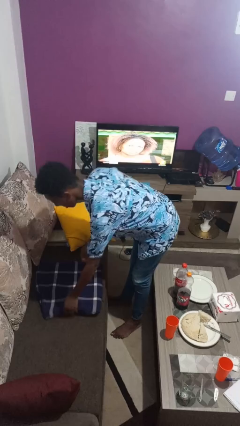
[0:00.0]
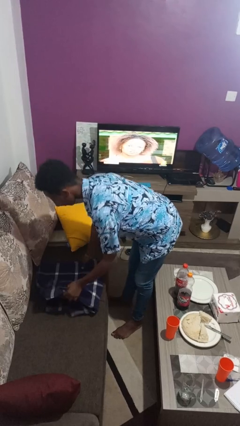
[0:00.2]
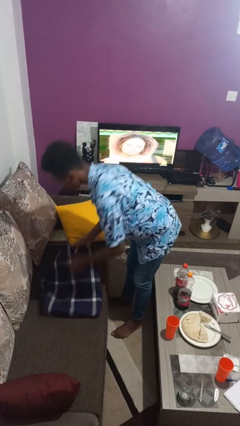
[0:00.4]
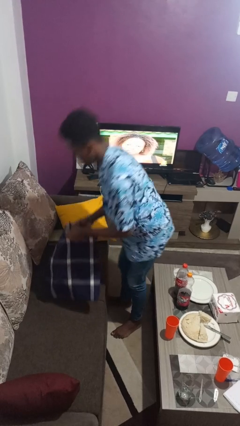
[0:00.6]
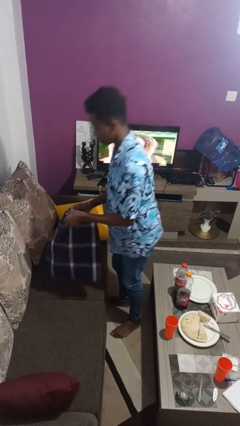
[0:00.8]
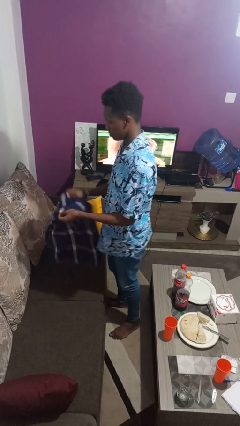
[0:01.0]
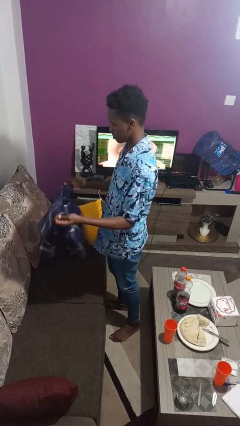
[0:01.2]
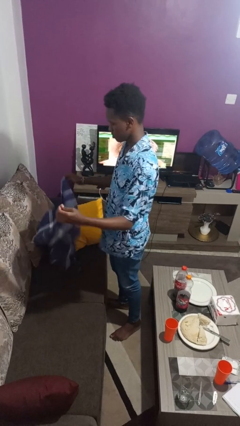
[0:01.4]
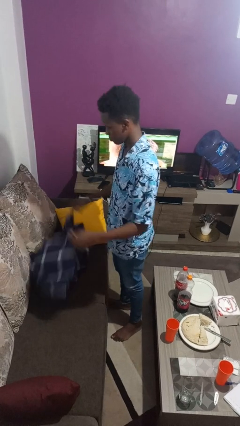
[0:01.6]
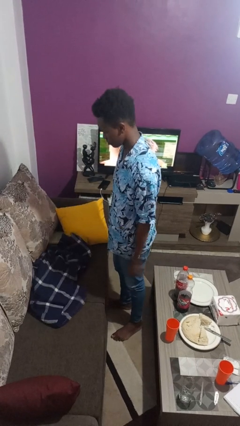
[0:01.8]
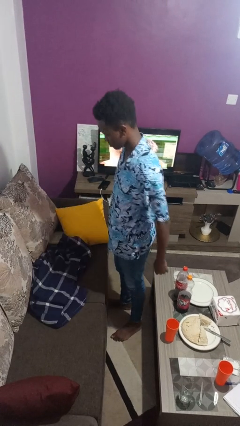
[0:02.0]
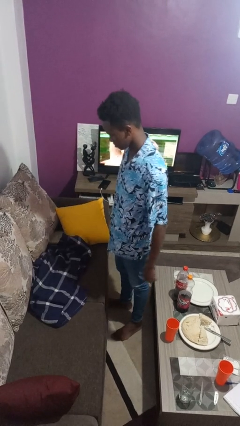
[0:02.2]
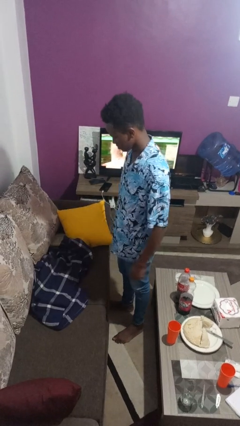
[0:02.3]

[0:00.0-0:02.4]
person unfolds blanket

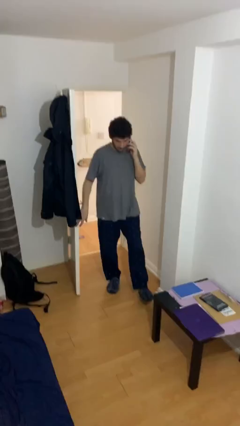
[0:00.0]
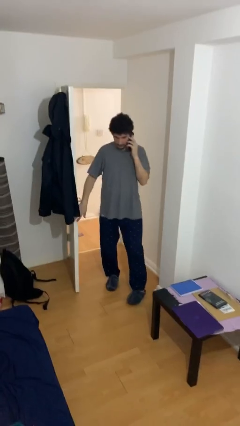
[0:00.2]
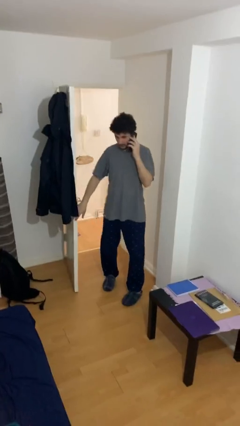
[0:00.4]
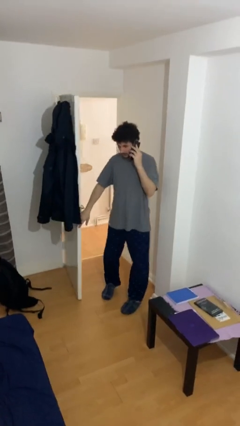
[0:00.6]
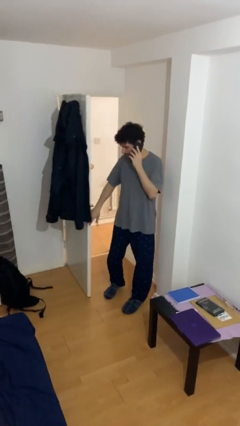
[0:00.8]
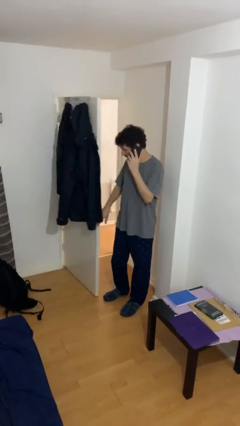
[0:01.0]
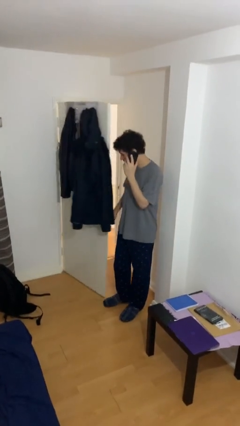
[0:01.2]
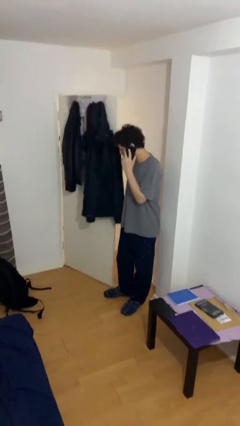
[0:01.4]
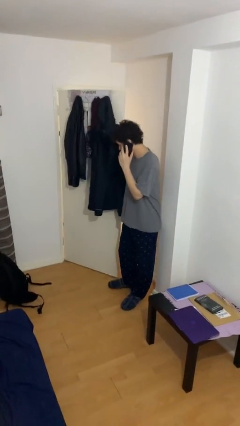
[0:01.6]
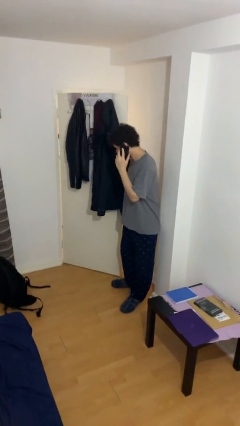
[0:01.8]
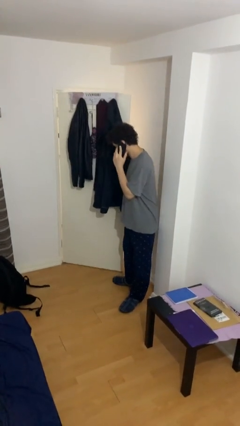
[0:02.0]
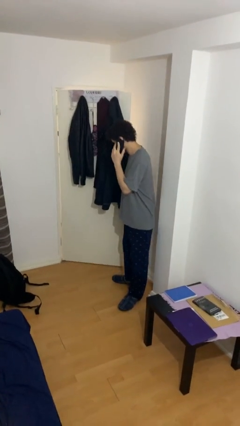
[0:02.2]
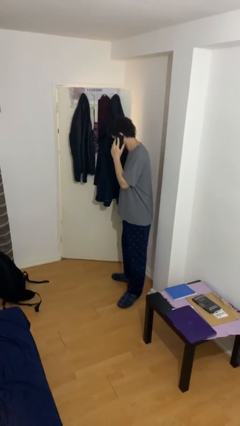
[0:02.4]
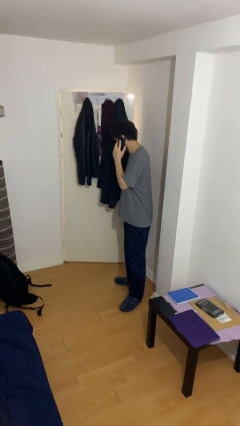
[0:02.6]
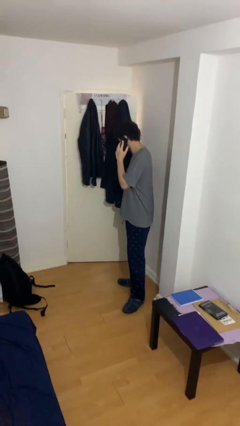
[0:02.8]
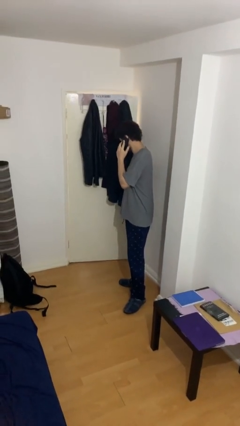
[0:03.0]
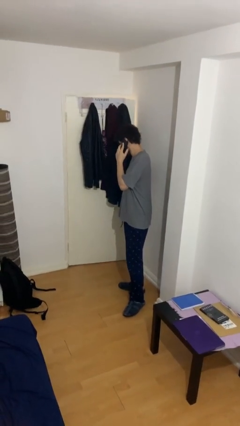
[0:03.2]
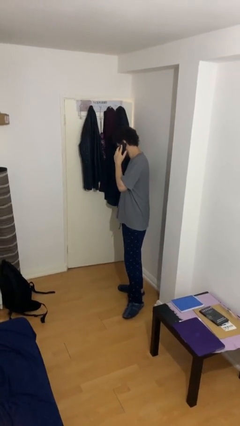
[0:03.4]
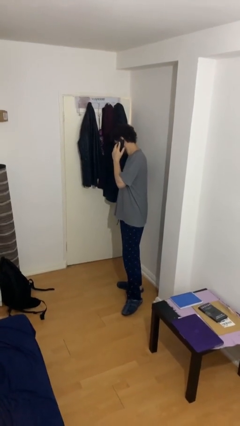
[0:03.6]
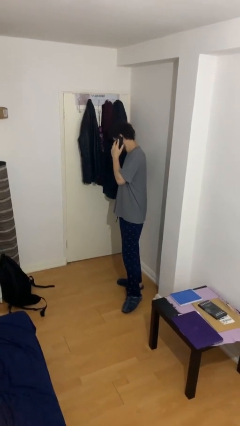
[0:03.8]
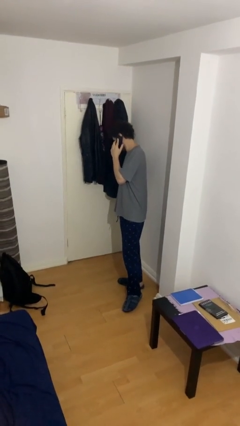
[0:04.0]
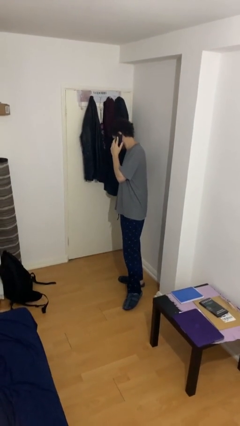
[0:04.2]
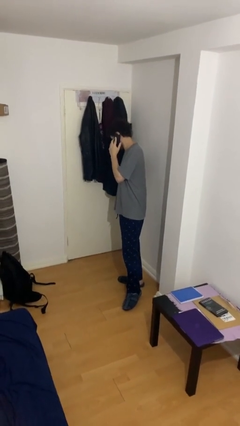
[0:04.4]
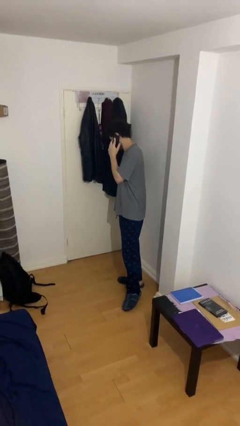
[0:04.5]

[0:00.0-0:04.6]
person closes facility door

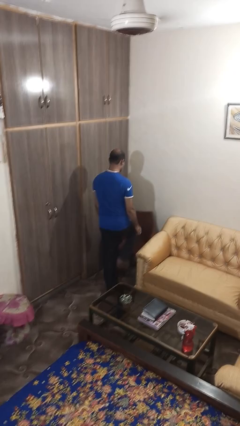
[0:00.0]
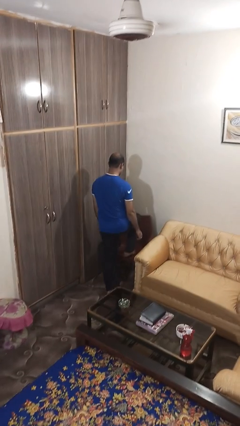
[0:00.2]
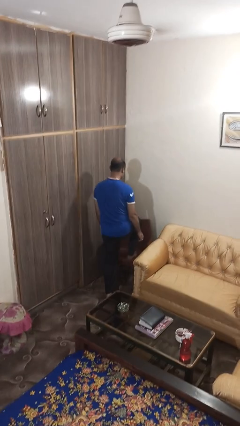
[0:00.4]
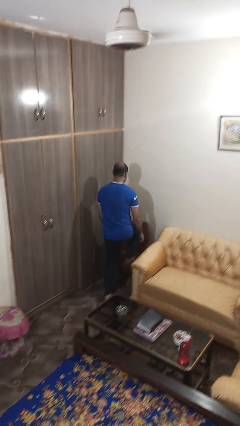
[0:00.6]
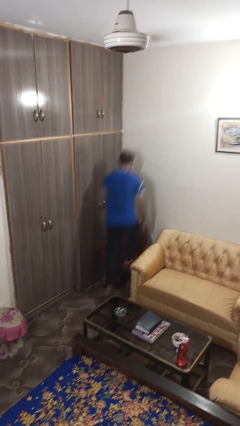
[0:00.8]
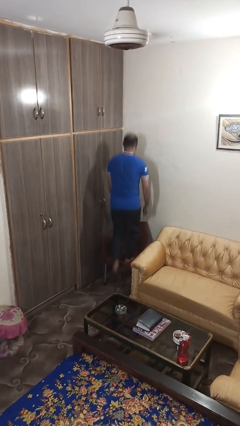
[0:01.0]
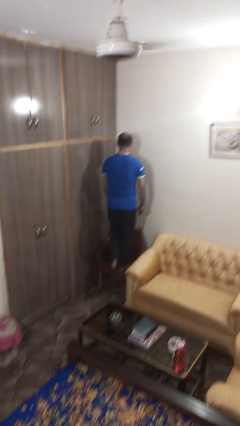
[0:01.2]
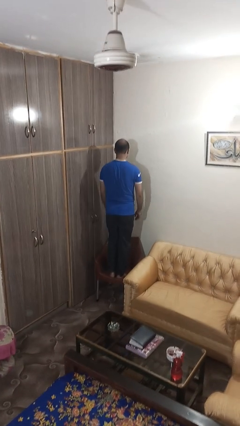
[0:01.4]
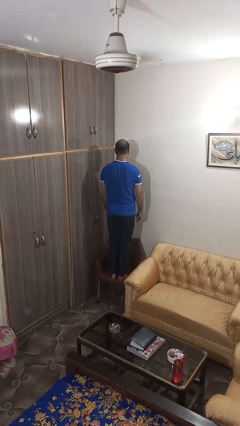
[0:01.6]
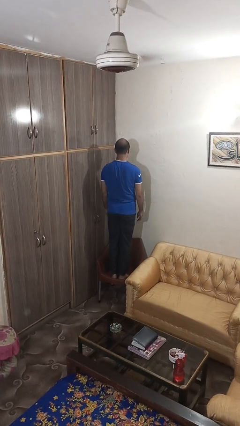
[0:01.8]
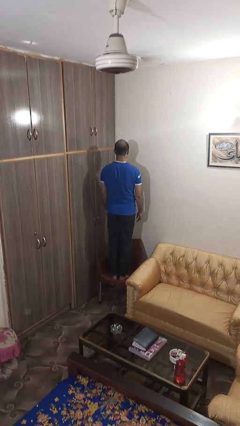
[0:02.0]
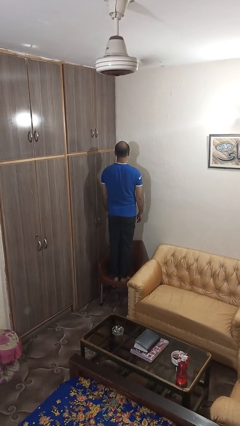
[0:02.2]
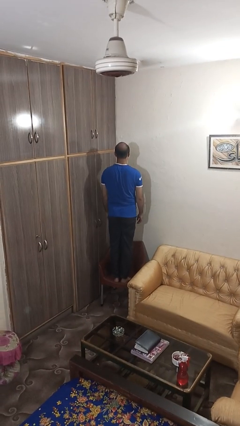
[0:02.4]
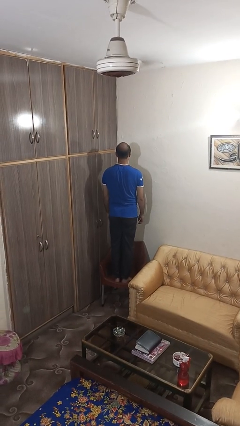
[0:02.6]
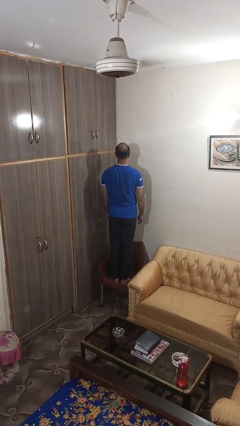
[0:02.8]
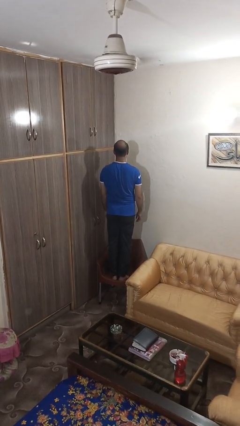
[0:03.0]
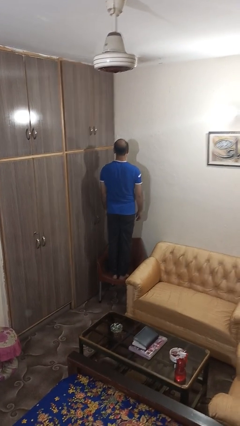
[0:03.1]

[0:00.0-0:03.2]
person climbs on chair

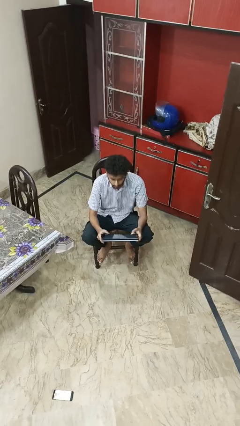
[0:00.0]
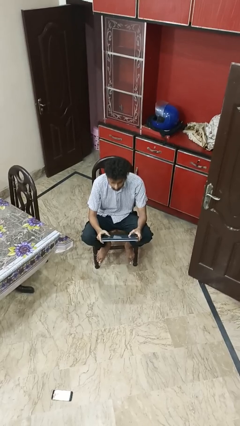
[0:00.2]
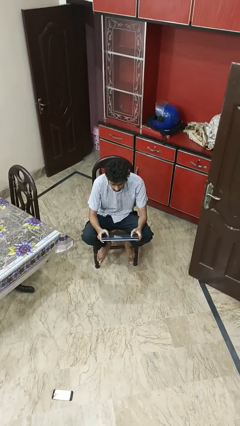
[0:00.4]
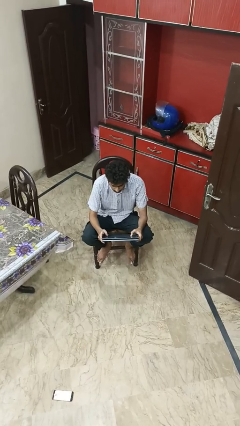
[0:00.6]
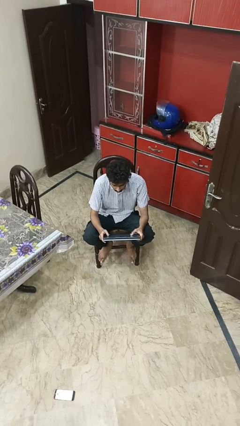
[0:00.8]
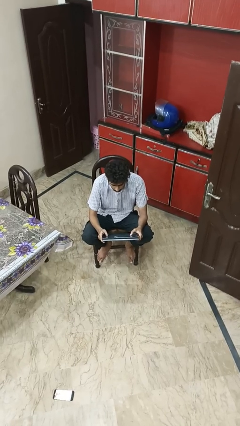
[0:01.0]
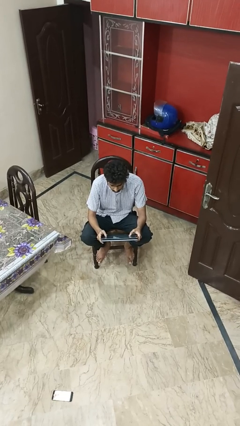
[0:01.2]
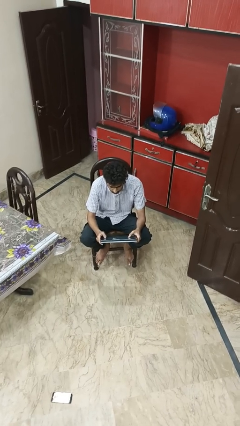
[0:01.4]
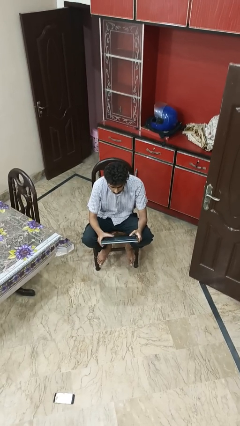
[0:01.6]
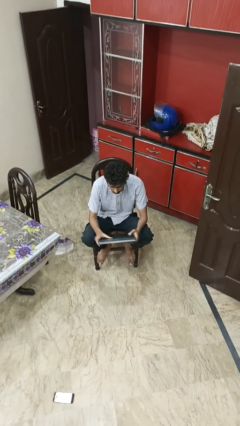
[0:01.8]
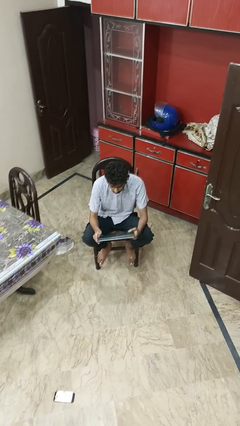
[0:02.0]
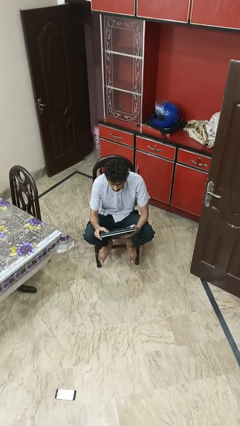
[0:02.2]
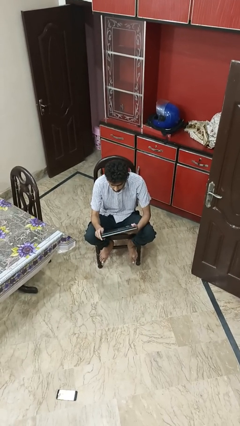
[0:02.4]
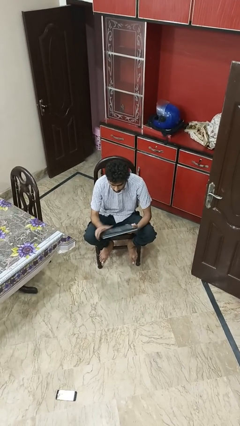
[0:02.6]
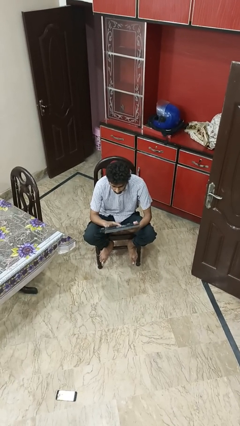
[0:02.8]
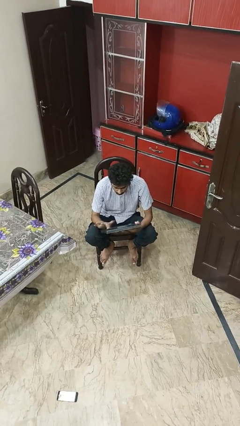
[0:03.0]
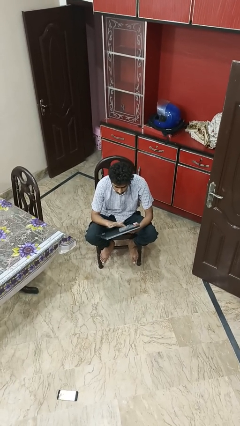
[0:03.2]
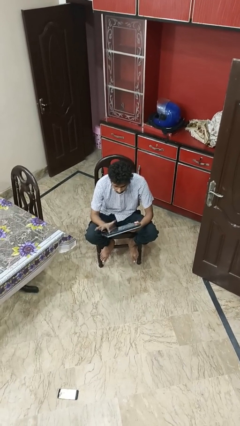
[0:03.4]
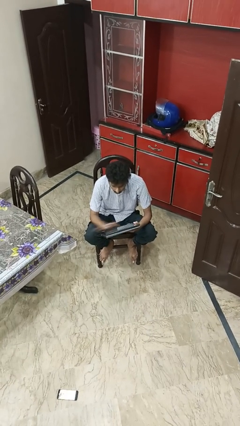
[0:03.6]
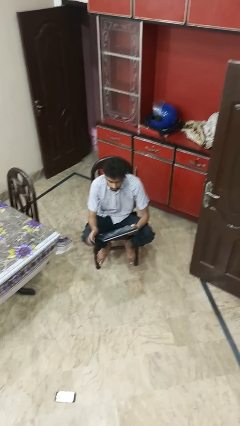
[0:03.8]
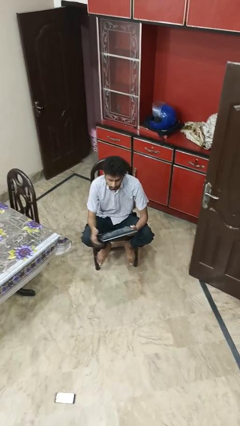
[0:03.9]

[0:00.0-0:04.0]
person interacts with tablet

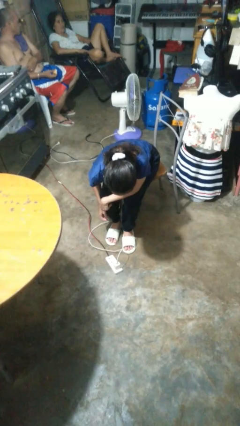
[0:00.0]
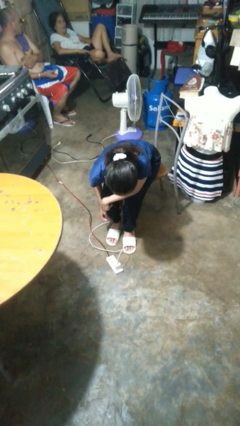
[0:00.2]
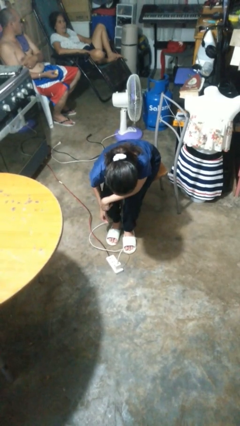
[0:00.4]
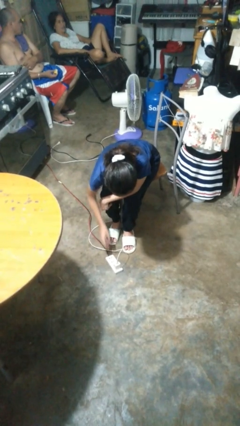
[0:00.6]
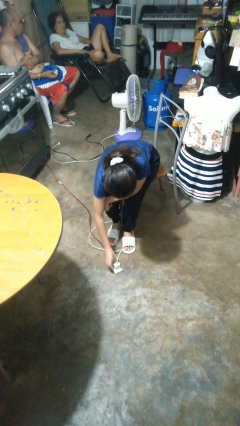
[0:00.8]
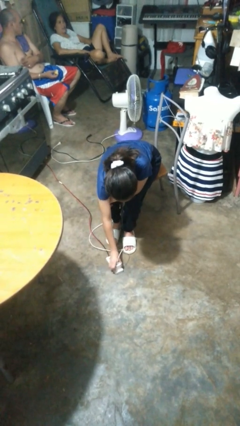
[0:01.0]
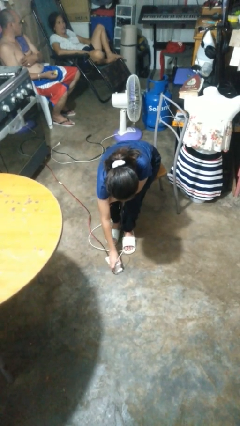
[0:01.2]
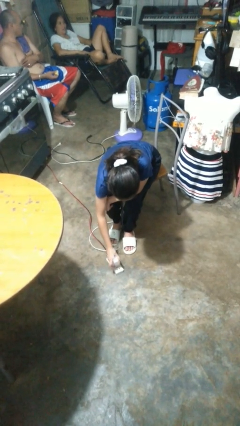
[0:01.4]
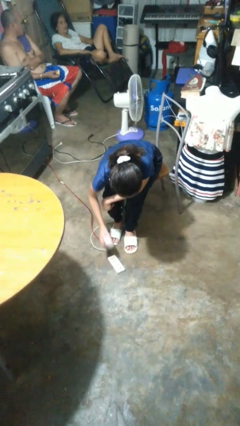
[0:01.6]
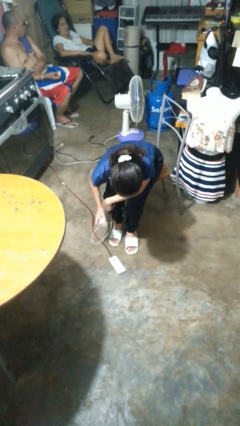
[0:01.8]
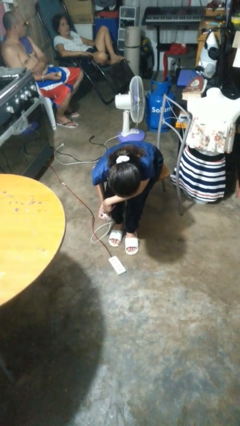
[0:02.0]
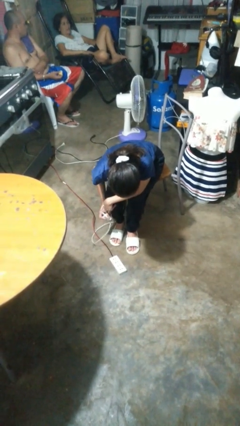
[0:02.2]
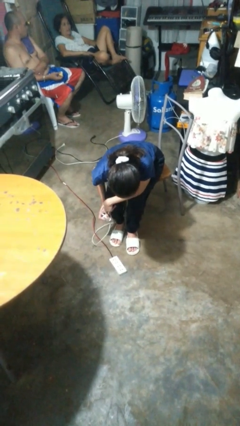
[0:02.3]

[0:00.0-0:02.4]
person unplugs from electrical socket

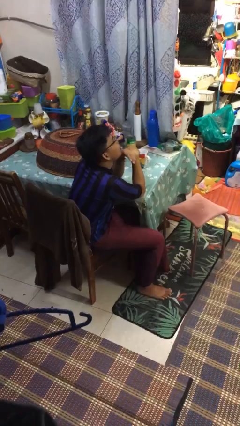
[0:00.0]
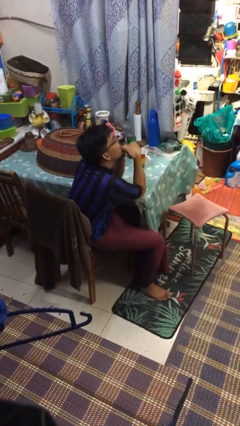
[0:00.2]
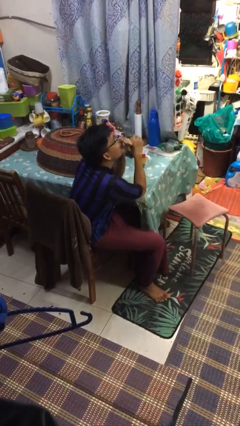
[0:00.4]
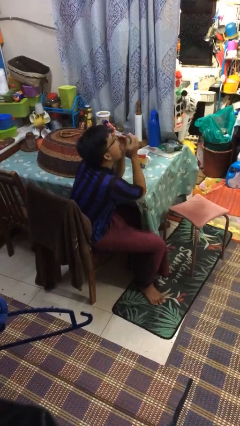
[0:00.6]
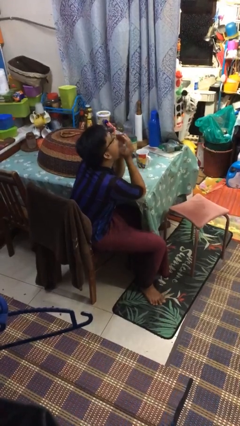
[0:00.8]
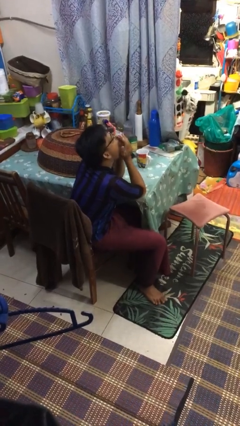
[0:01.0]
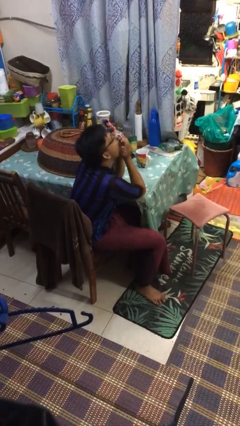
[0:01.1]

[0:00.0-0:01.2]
person yawns
